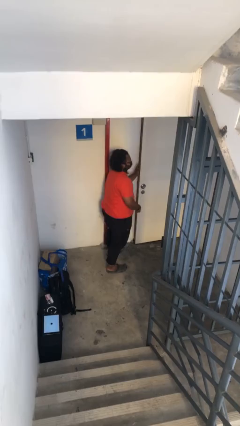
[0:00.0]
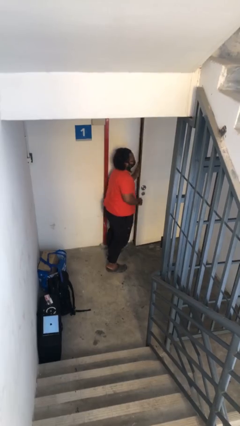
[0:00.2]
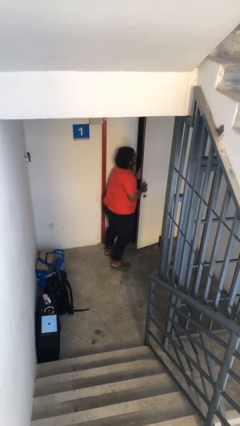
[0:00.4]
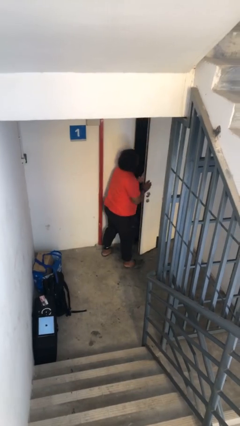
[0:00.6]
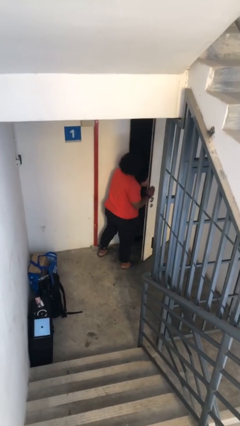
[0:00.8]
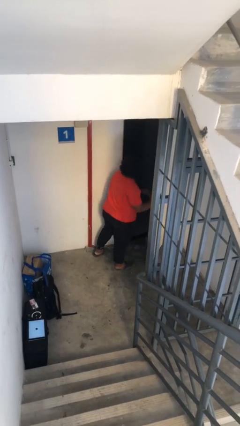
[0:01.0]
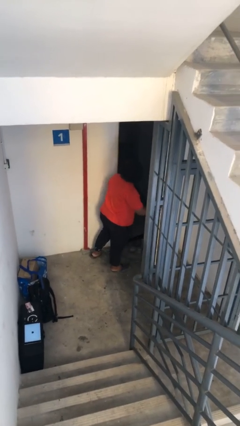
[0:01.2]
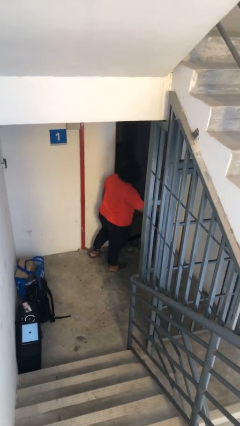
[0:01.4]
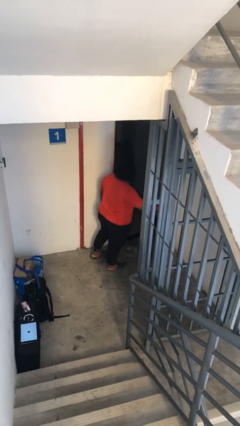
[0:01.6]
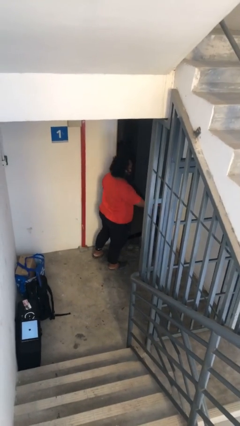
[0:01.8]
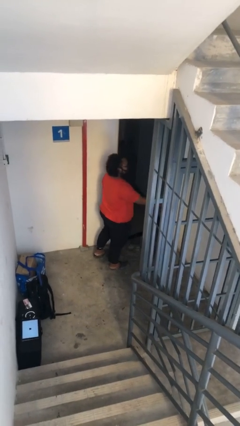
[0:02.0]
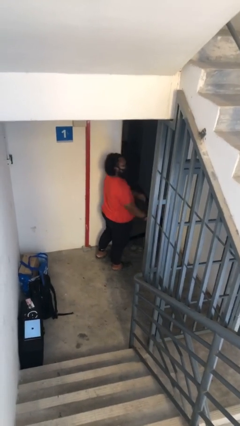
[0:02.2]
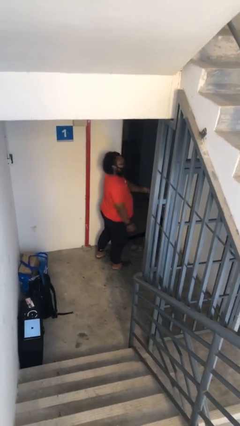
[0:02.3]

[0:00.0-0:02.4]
person opens facility door

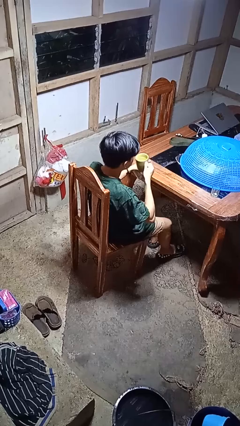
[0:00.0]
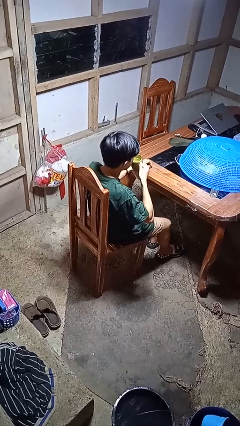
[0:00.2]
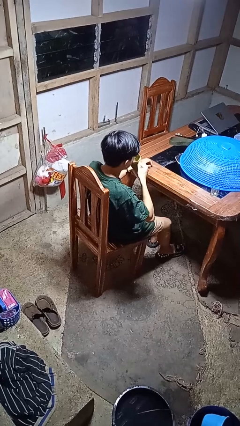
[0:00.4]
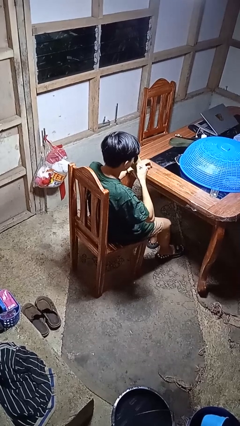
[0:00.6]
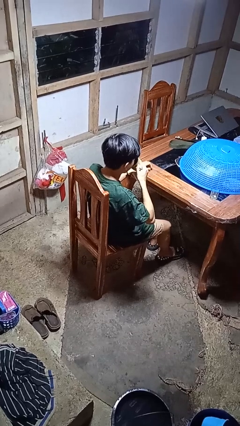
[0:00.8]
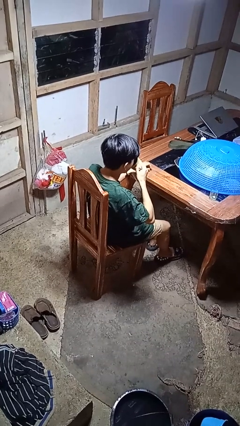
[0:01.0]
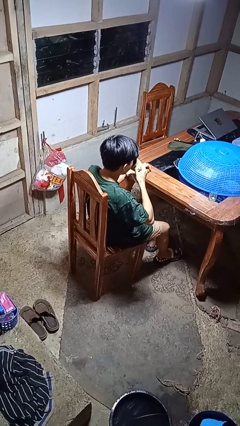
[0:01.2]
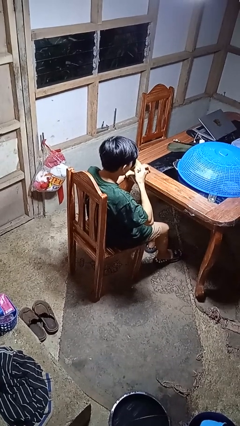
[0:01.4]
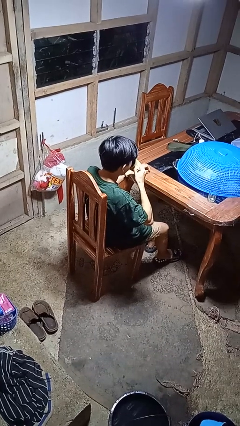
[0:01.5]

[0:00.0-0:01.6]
person drinks from mug

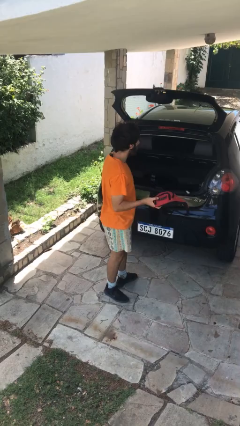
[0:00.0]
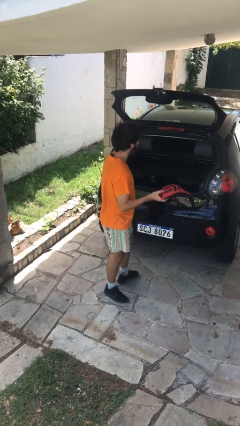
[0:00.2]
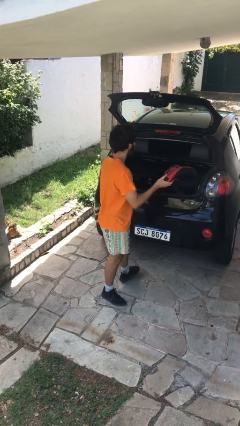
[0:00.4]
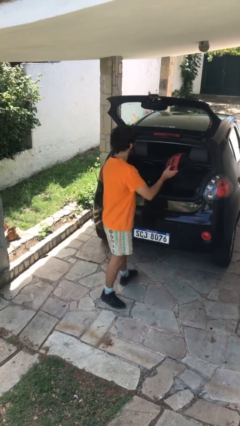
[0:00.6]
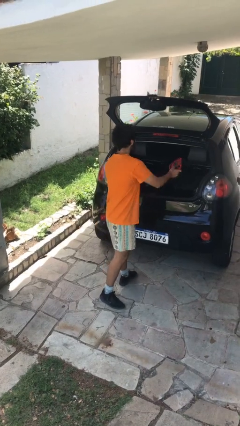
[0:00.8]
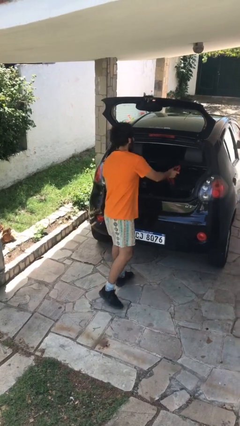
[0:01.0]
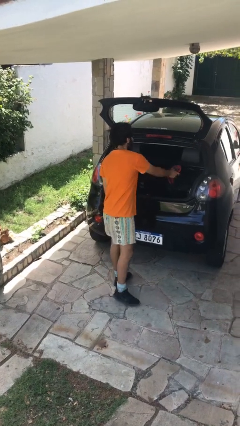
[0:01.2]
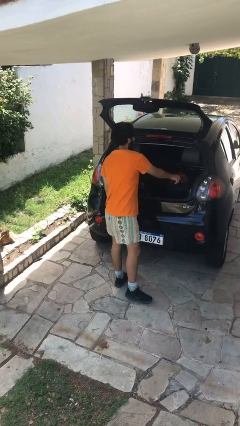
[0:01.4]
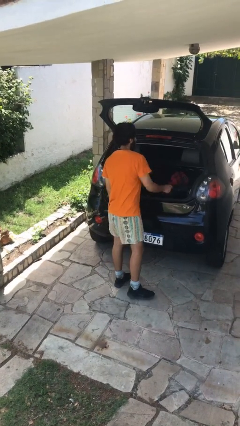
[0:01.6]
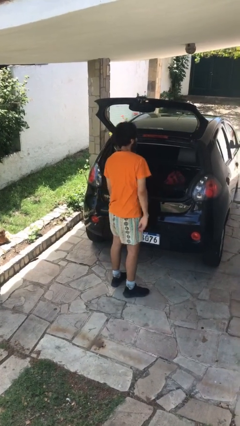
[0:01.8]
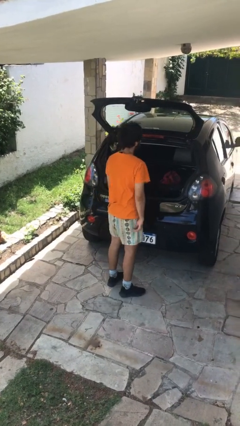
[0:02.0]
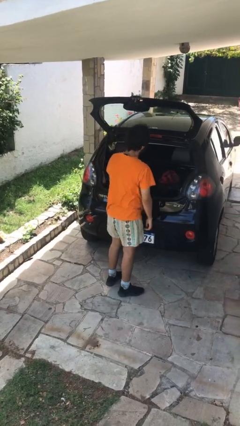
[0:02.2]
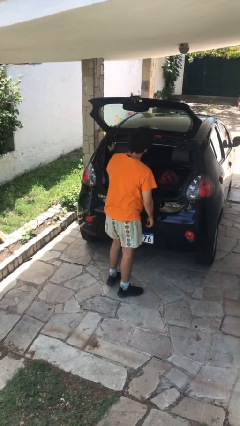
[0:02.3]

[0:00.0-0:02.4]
person loads car

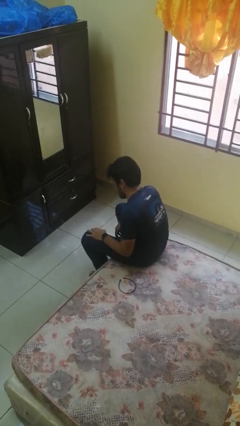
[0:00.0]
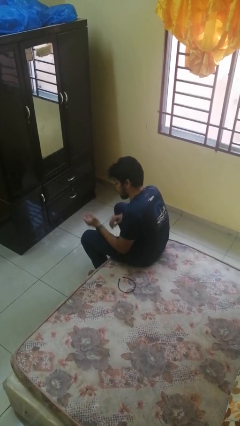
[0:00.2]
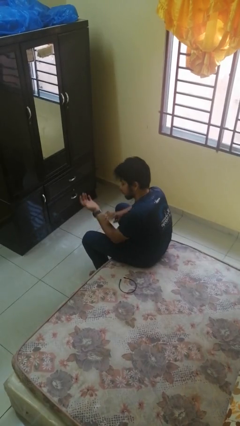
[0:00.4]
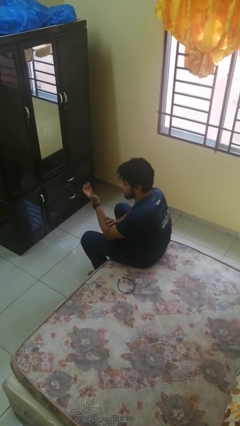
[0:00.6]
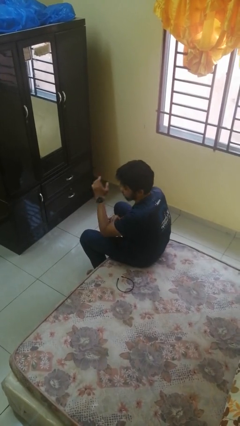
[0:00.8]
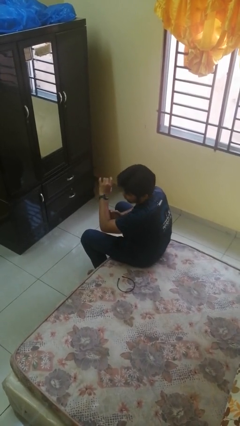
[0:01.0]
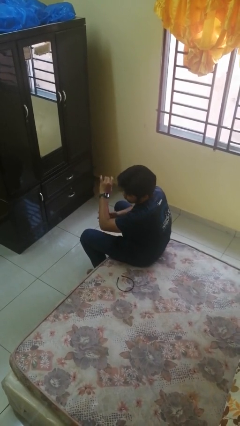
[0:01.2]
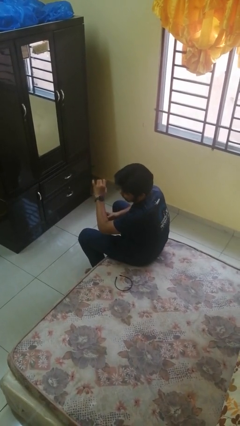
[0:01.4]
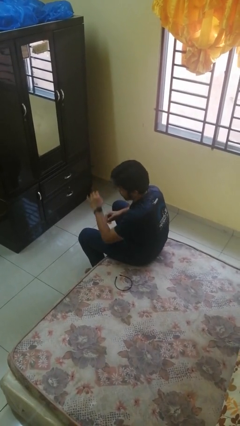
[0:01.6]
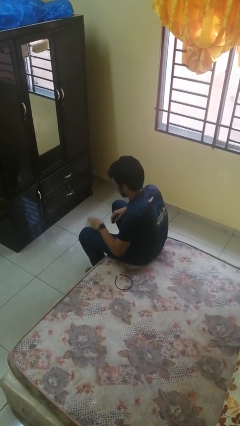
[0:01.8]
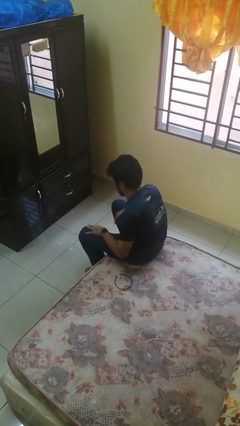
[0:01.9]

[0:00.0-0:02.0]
person looks at hands in lap

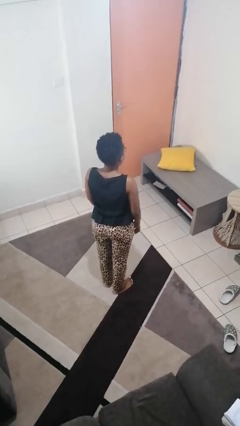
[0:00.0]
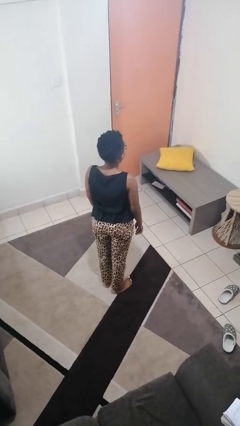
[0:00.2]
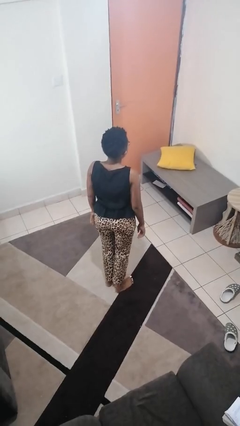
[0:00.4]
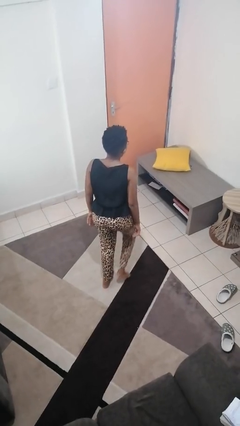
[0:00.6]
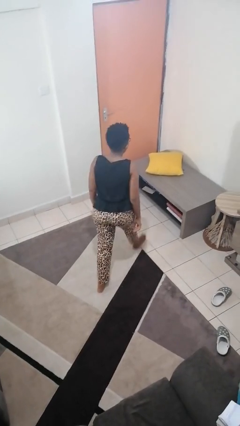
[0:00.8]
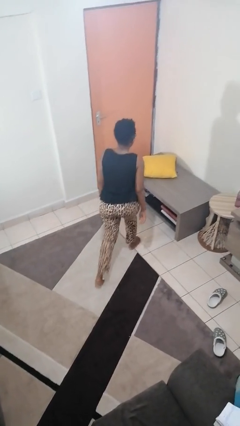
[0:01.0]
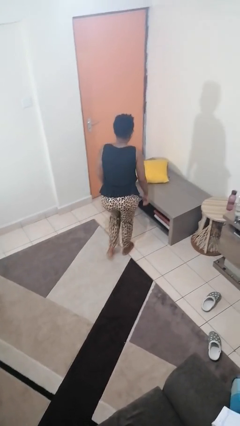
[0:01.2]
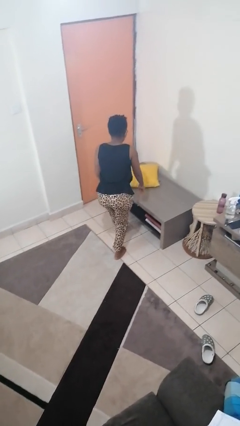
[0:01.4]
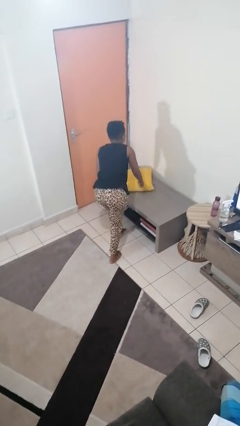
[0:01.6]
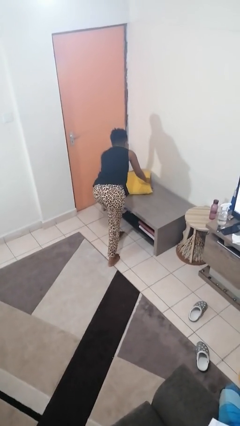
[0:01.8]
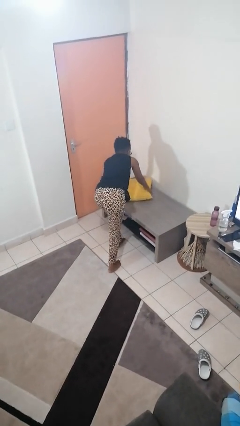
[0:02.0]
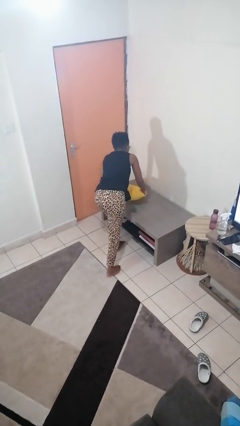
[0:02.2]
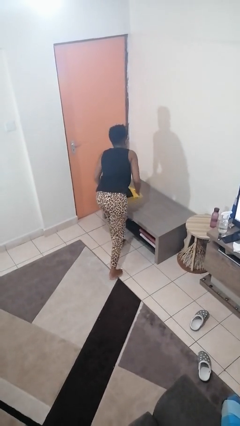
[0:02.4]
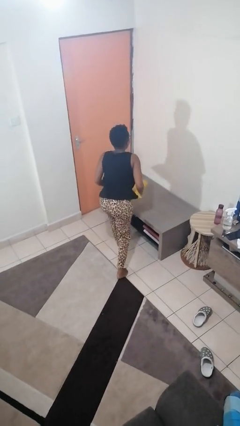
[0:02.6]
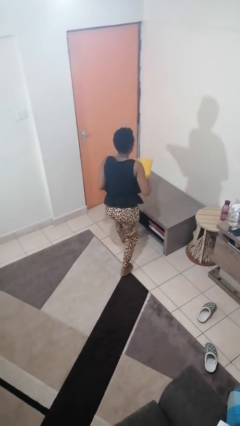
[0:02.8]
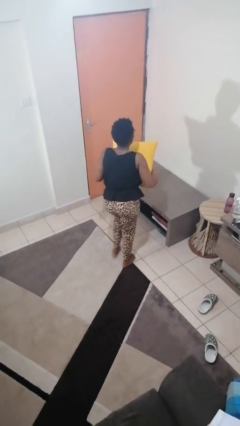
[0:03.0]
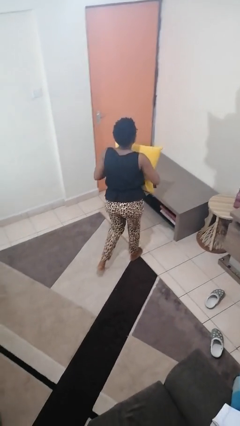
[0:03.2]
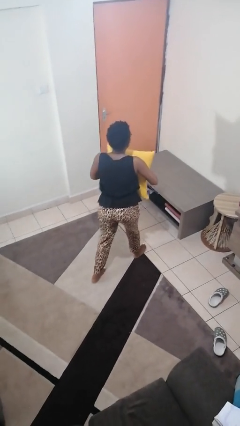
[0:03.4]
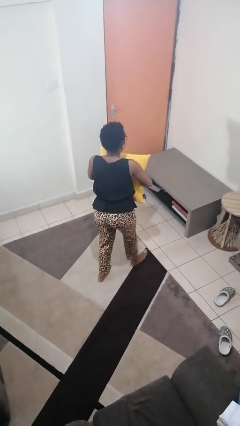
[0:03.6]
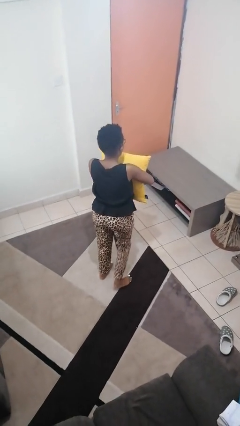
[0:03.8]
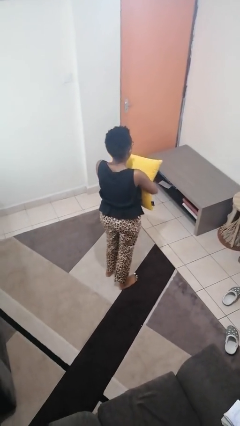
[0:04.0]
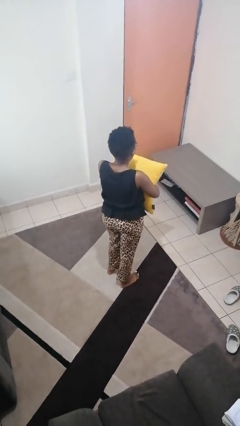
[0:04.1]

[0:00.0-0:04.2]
person picks up object from table

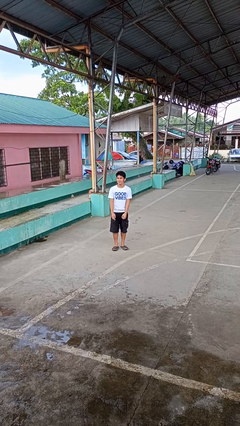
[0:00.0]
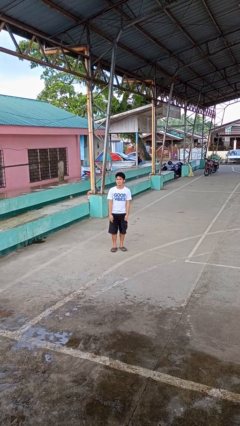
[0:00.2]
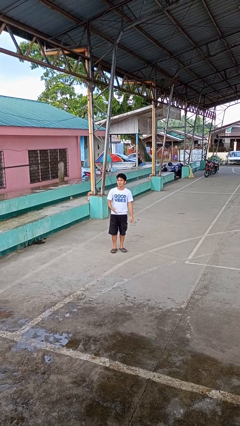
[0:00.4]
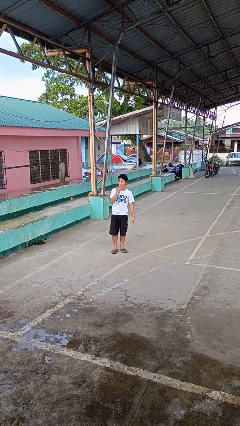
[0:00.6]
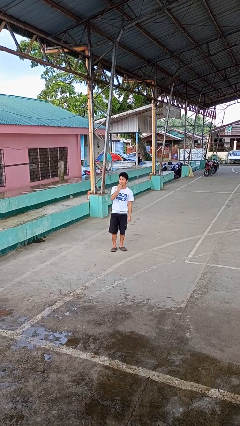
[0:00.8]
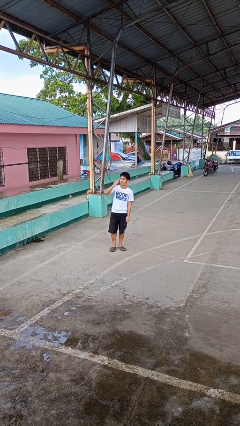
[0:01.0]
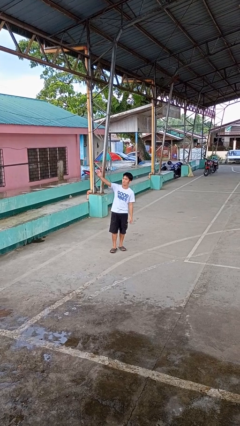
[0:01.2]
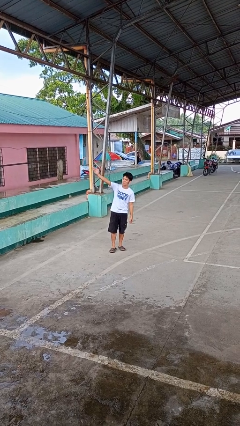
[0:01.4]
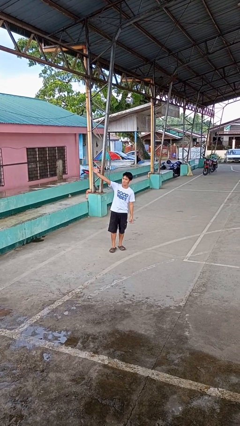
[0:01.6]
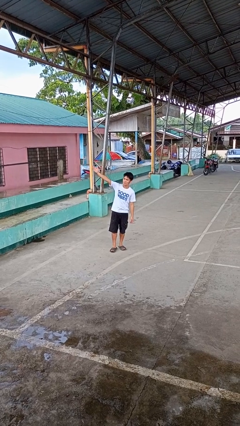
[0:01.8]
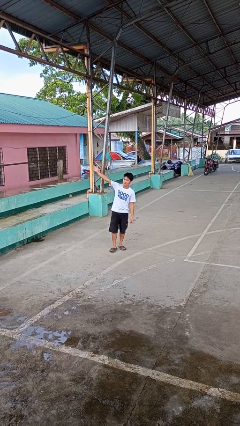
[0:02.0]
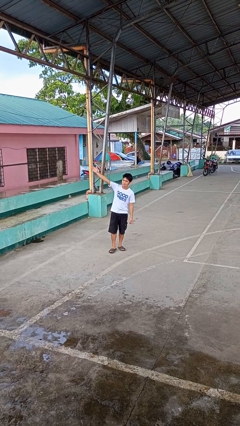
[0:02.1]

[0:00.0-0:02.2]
person gestures blow kiss

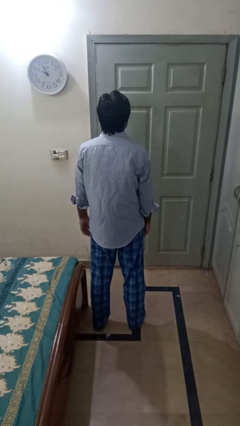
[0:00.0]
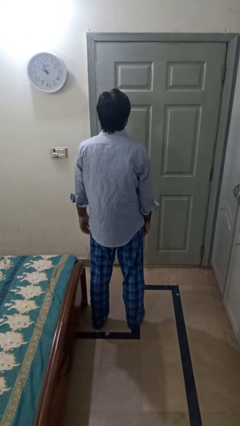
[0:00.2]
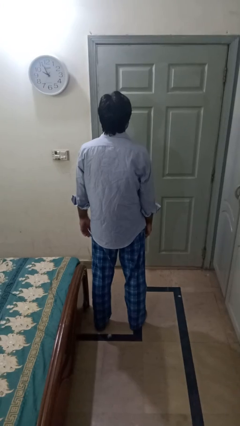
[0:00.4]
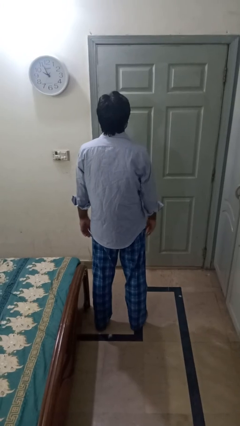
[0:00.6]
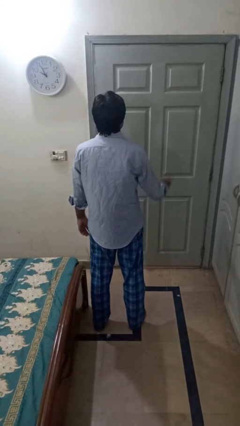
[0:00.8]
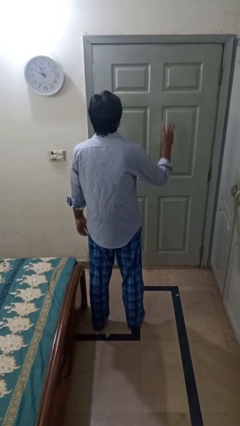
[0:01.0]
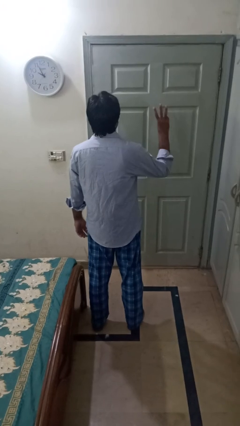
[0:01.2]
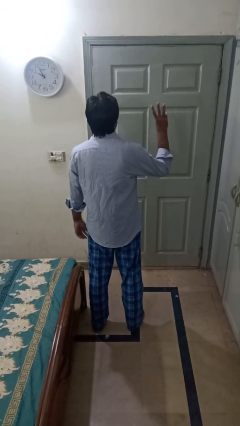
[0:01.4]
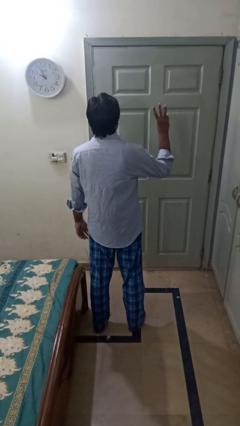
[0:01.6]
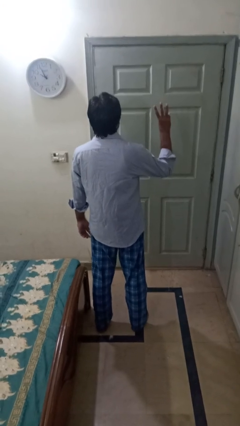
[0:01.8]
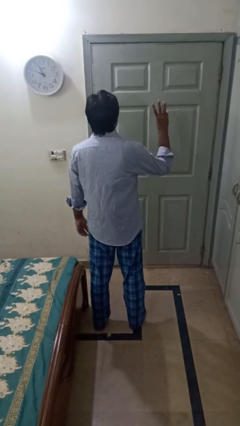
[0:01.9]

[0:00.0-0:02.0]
person gestures number three

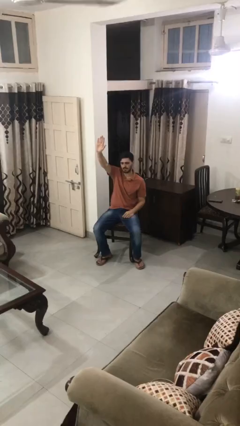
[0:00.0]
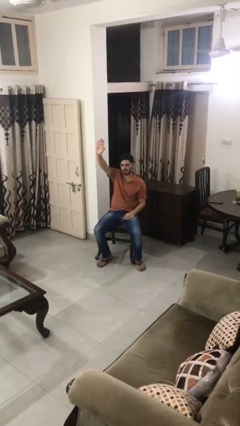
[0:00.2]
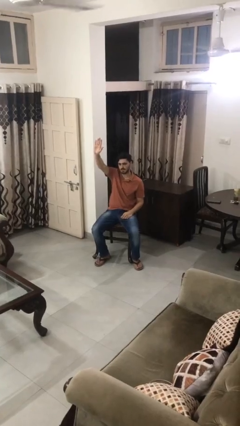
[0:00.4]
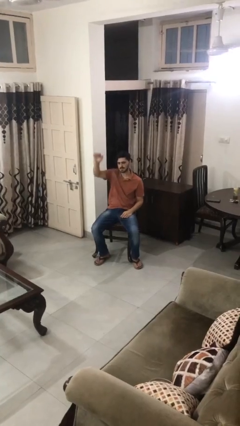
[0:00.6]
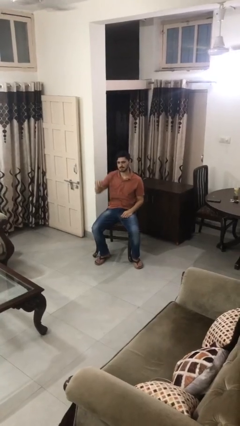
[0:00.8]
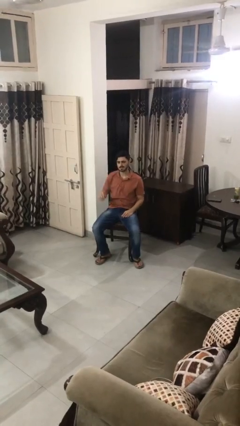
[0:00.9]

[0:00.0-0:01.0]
person gestures lower hand
